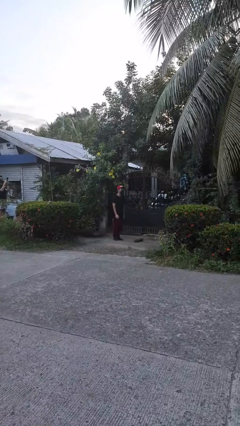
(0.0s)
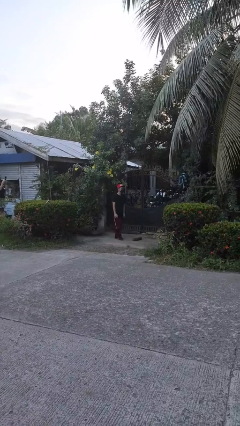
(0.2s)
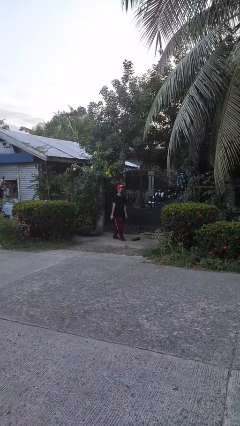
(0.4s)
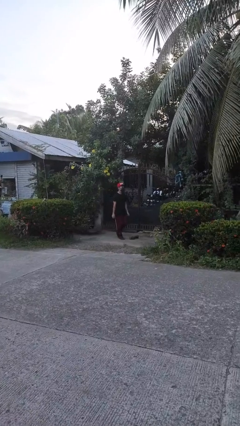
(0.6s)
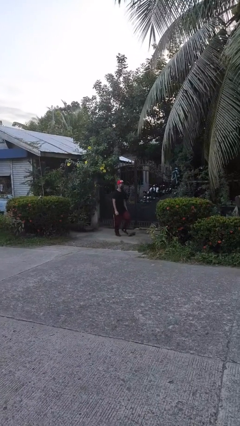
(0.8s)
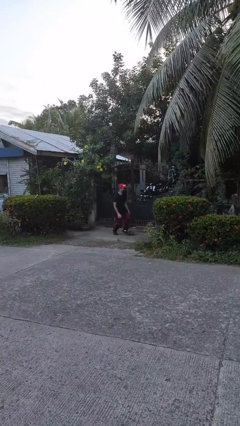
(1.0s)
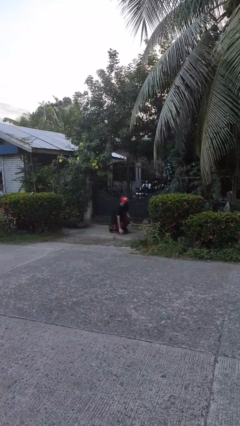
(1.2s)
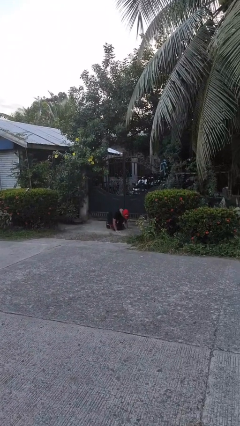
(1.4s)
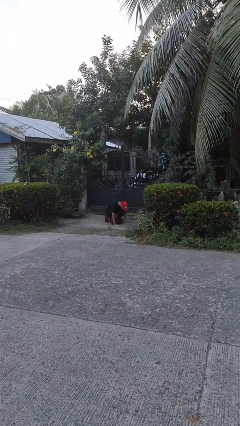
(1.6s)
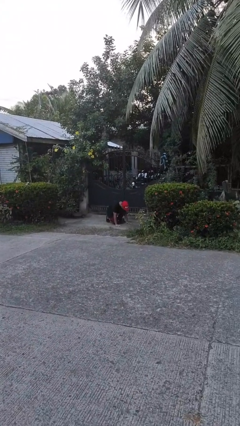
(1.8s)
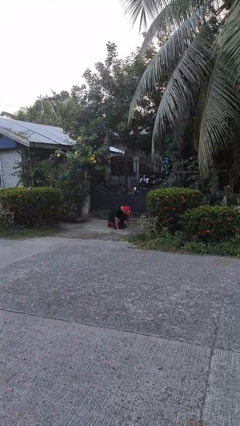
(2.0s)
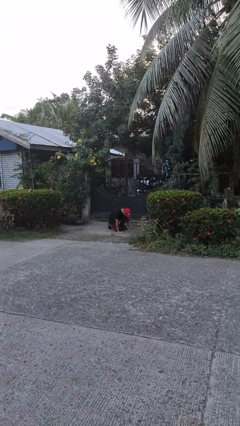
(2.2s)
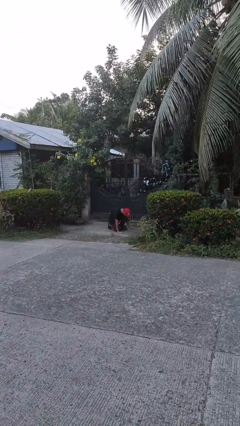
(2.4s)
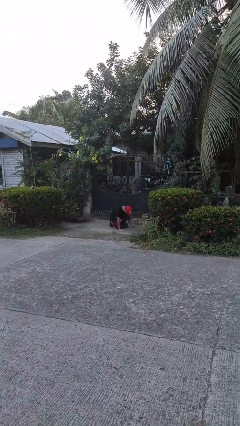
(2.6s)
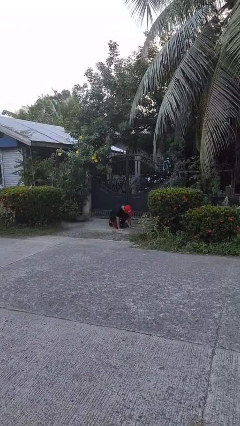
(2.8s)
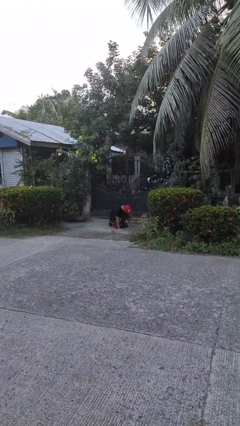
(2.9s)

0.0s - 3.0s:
person trips on object on floor

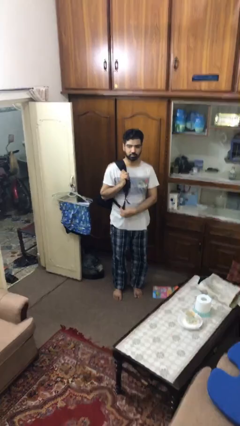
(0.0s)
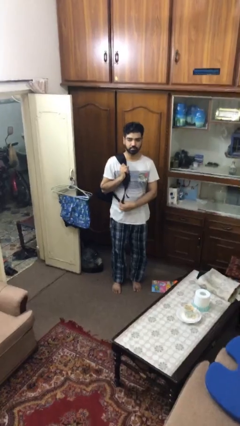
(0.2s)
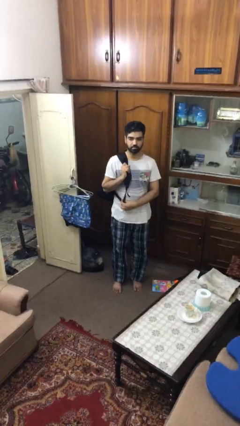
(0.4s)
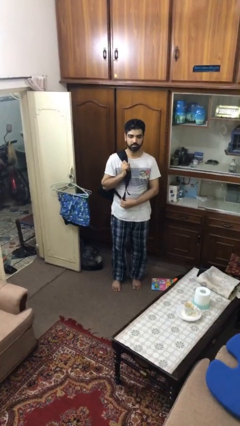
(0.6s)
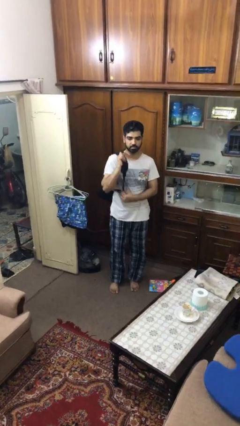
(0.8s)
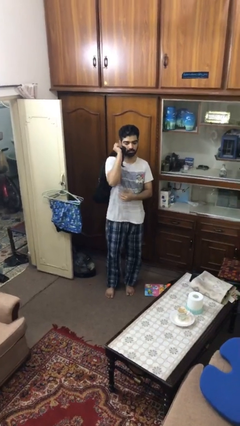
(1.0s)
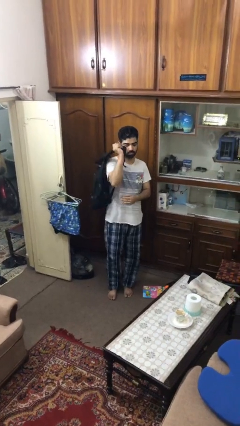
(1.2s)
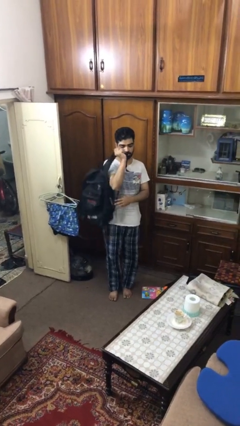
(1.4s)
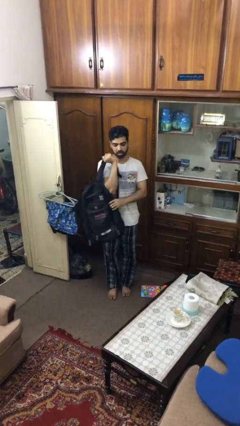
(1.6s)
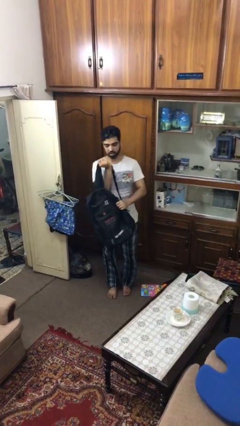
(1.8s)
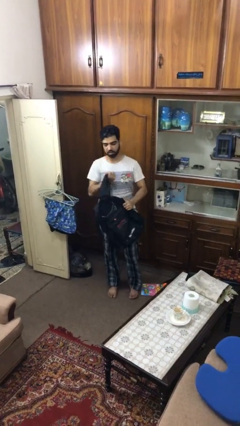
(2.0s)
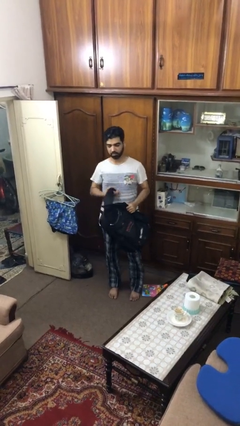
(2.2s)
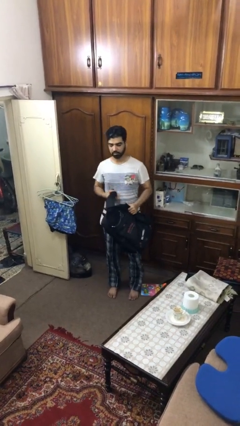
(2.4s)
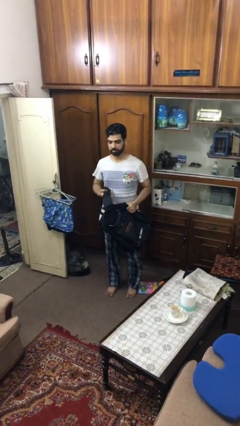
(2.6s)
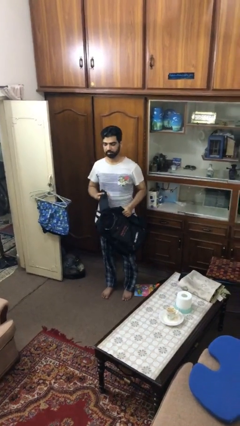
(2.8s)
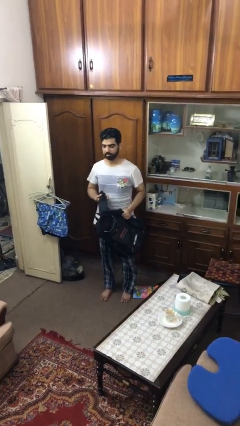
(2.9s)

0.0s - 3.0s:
person takes off backpack

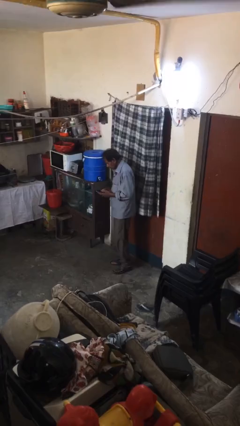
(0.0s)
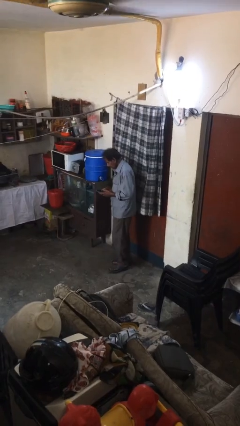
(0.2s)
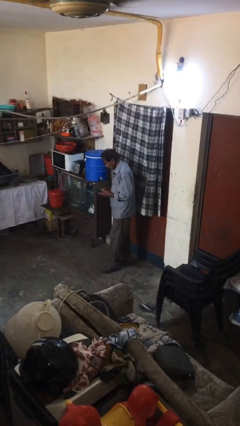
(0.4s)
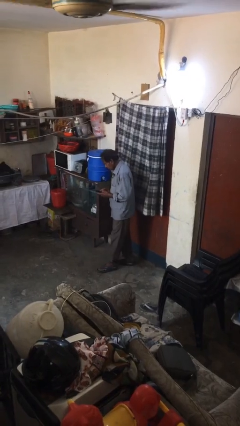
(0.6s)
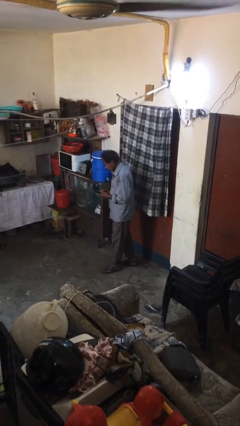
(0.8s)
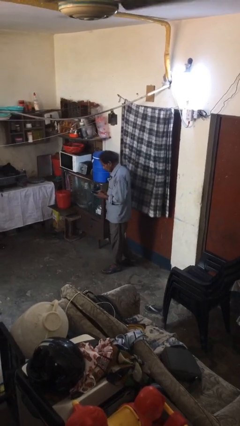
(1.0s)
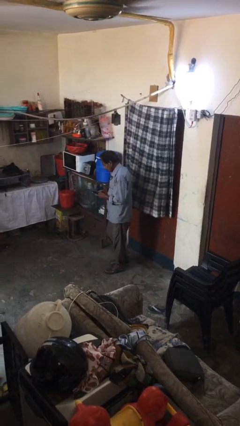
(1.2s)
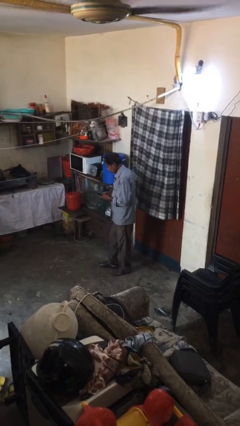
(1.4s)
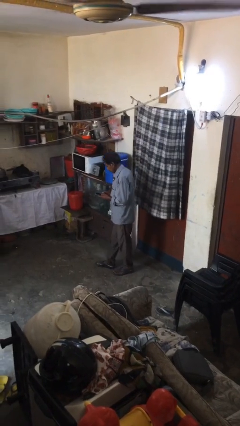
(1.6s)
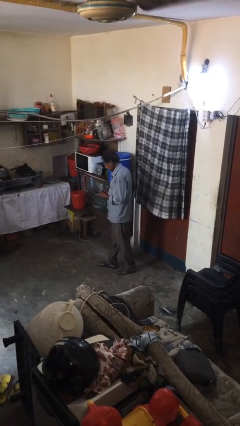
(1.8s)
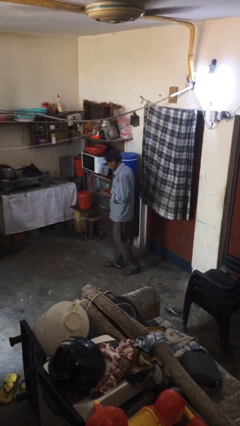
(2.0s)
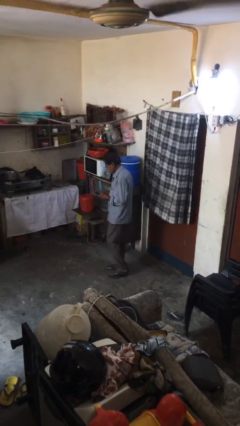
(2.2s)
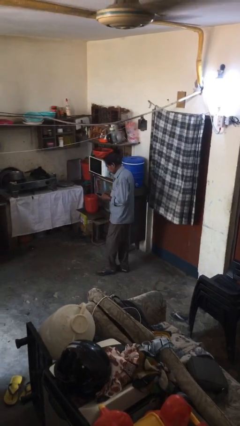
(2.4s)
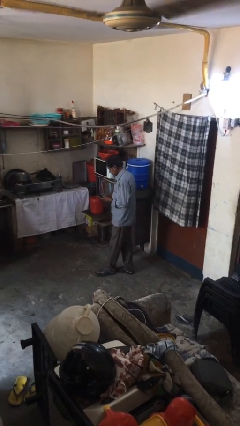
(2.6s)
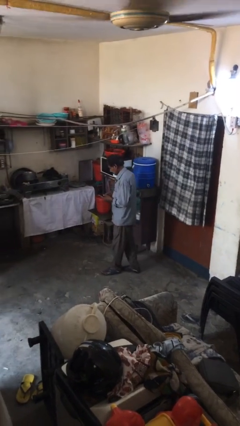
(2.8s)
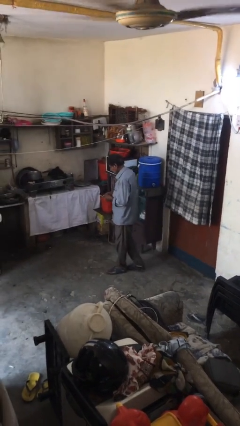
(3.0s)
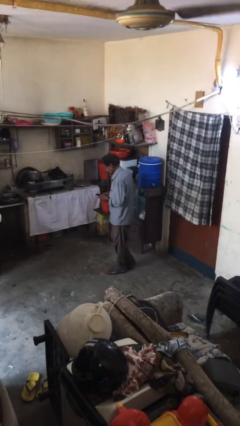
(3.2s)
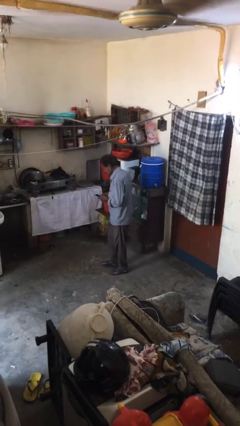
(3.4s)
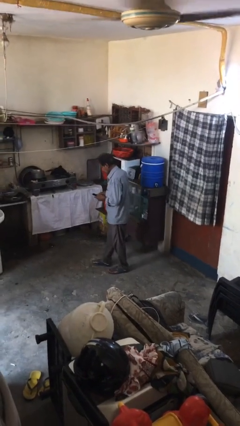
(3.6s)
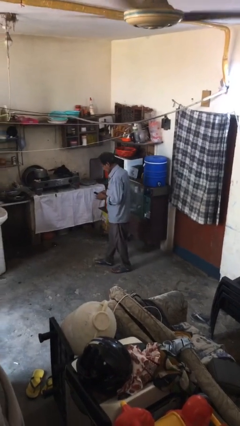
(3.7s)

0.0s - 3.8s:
person texts on phone

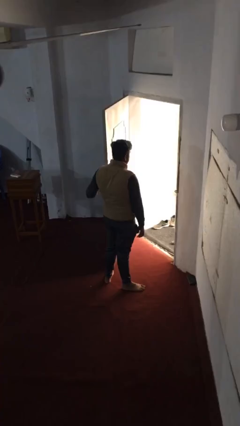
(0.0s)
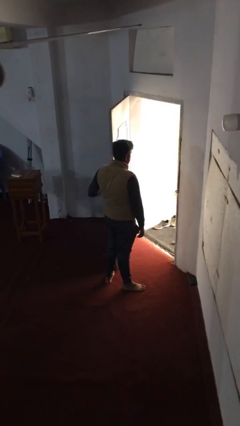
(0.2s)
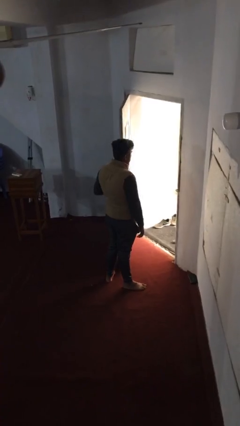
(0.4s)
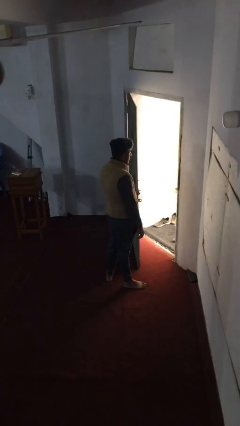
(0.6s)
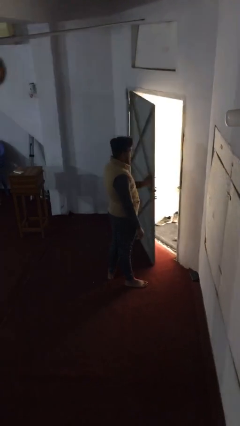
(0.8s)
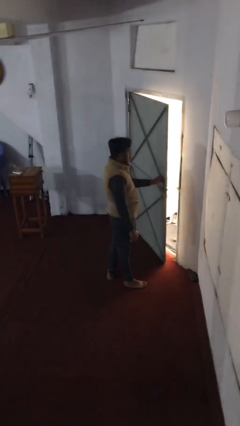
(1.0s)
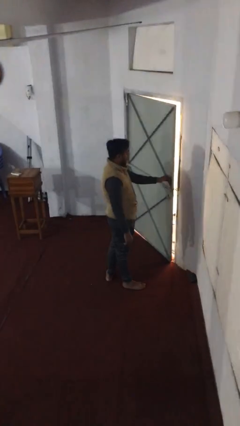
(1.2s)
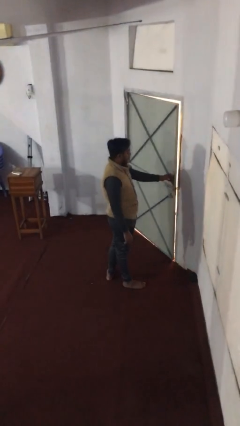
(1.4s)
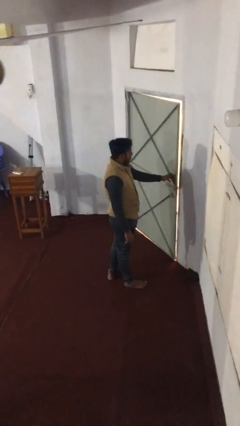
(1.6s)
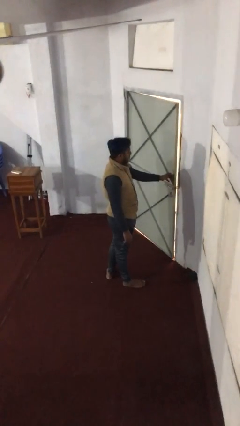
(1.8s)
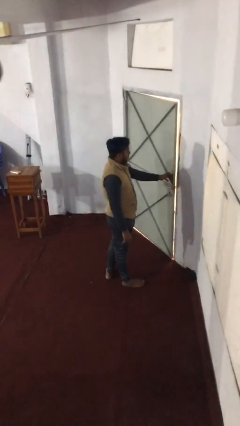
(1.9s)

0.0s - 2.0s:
person closes facility door

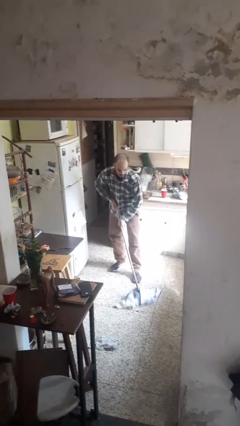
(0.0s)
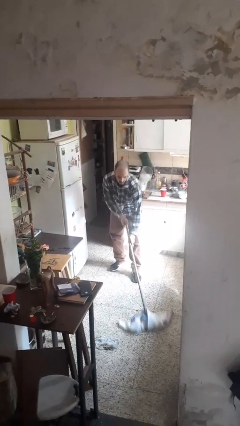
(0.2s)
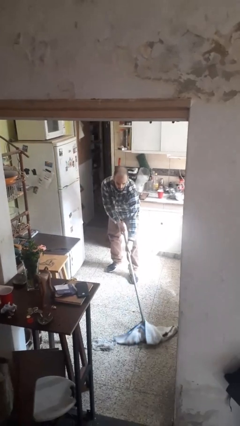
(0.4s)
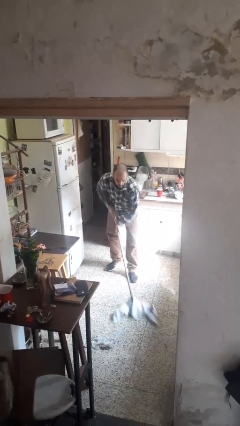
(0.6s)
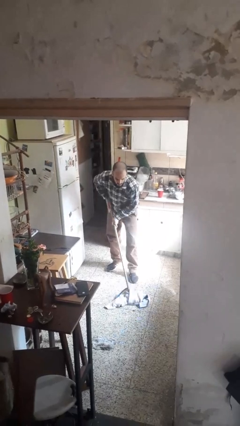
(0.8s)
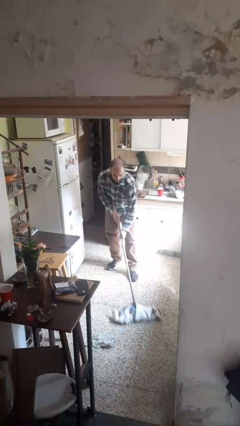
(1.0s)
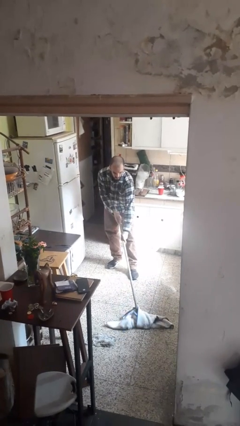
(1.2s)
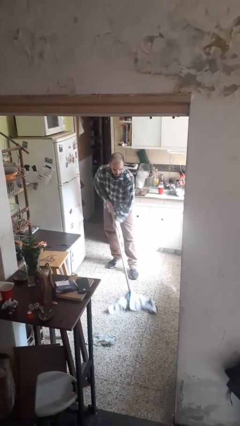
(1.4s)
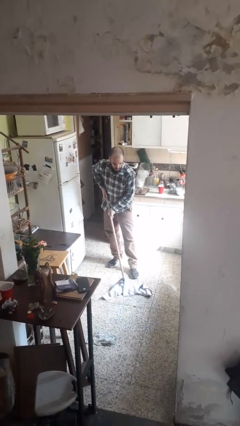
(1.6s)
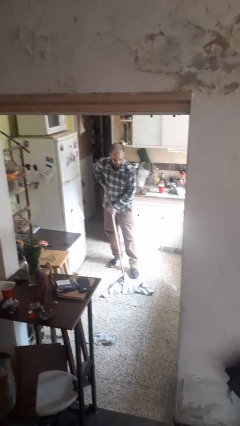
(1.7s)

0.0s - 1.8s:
person mops

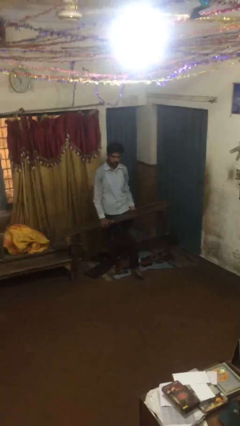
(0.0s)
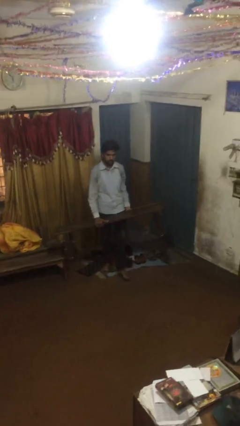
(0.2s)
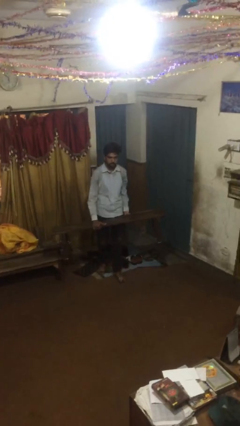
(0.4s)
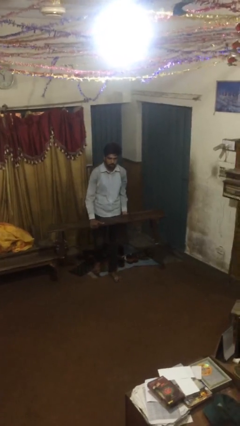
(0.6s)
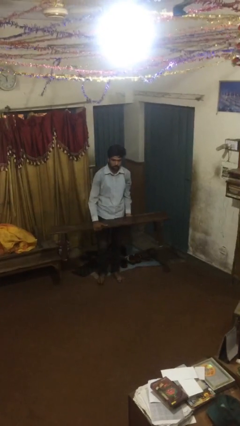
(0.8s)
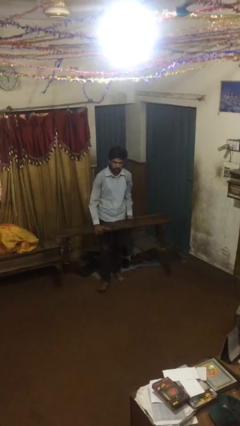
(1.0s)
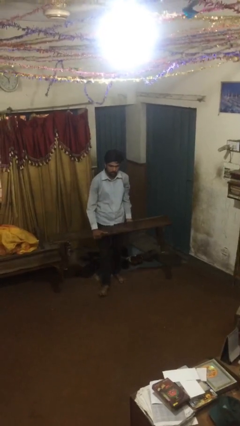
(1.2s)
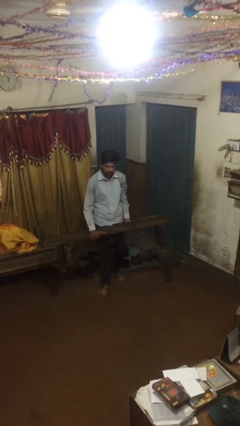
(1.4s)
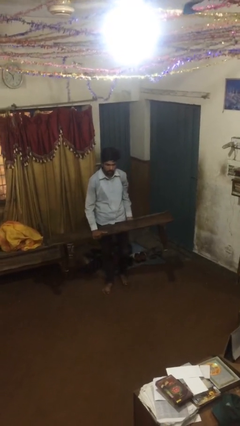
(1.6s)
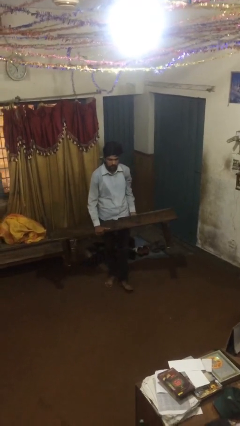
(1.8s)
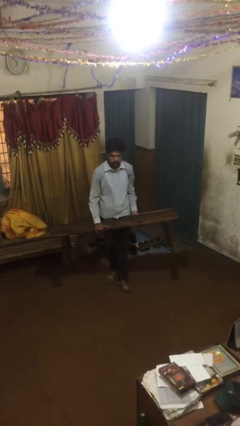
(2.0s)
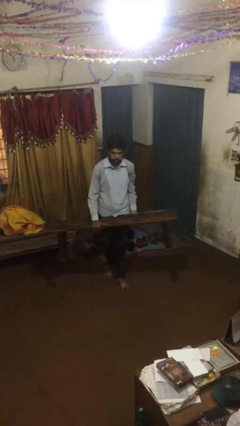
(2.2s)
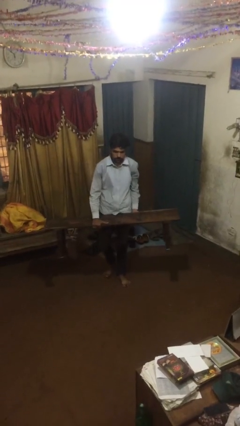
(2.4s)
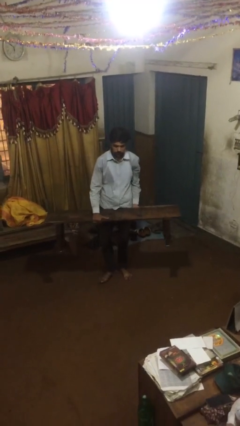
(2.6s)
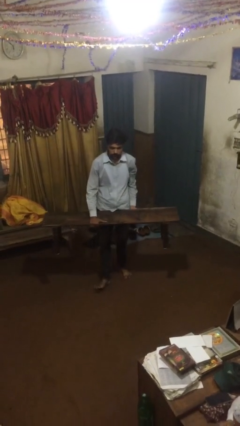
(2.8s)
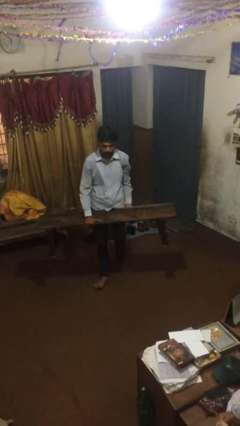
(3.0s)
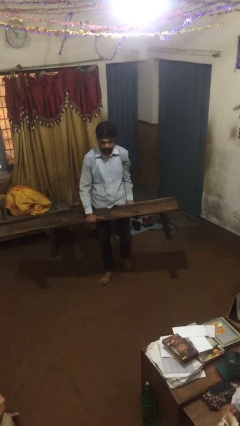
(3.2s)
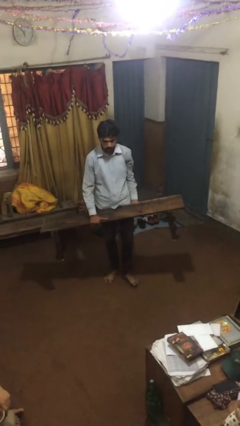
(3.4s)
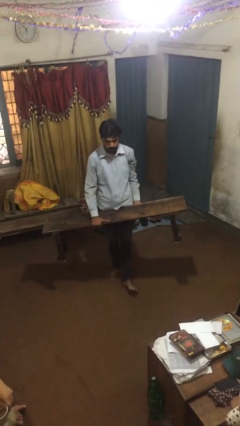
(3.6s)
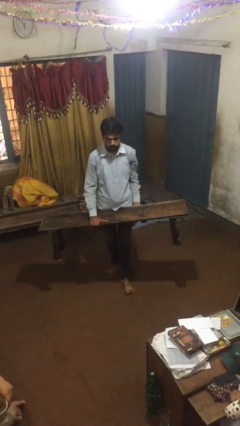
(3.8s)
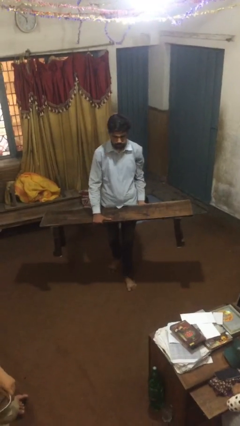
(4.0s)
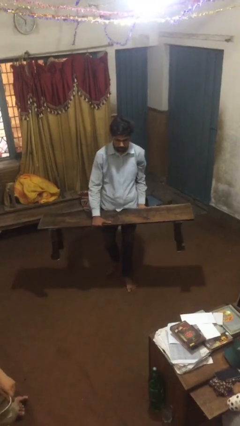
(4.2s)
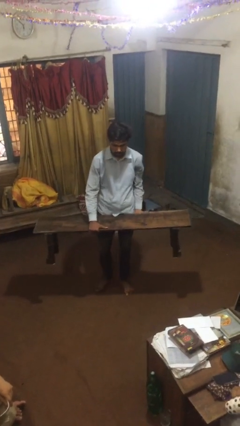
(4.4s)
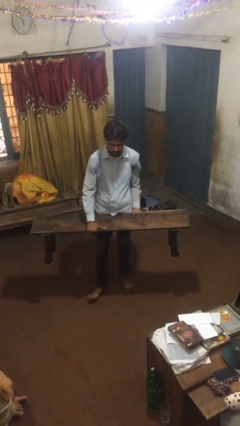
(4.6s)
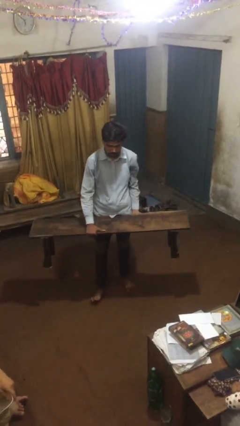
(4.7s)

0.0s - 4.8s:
person carries heavy object
